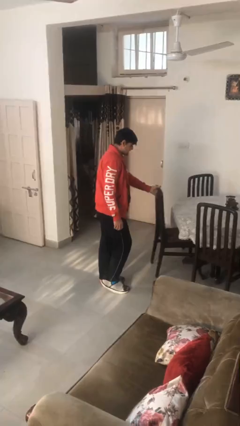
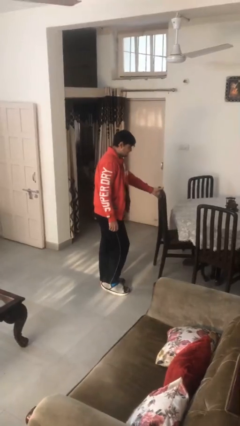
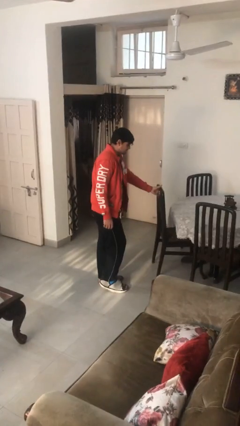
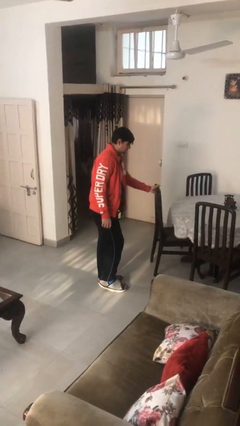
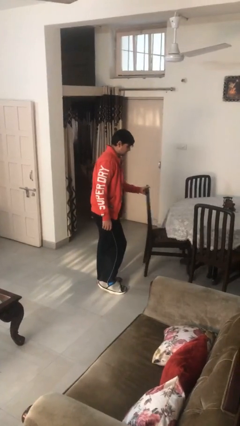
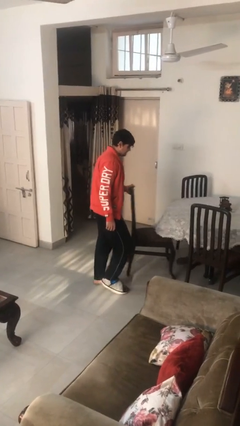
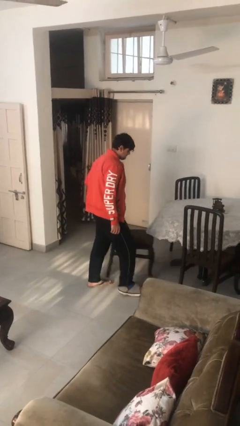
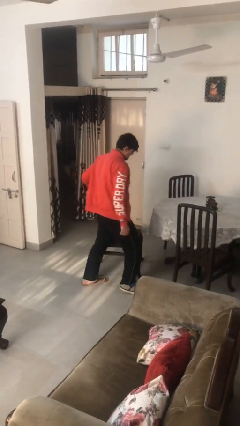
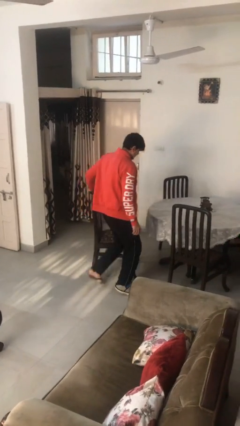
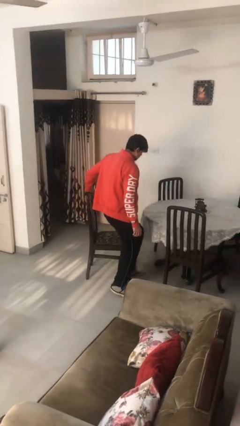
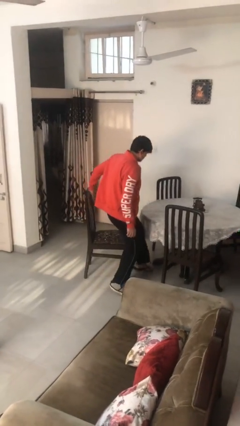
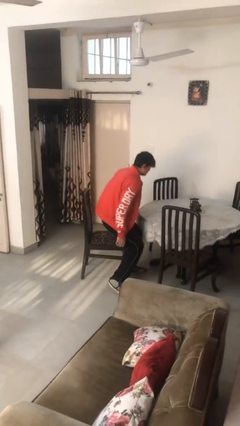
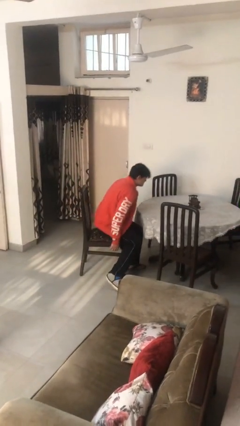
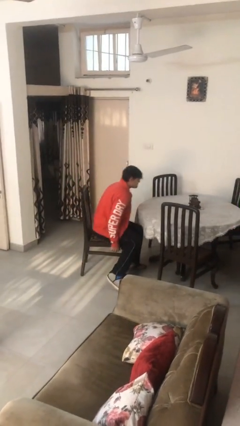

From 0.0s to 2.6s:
person sits down

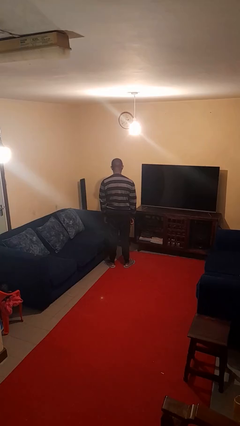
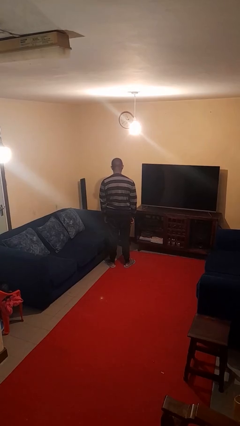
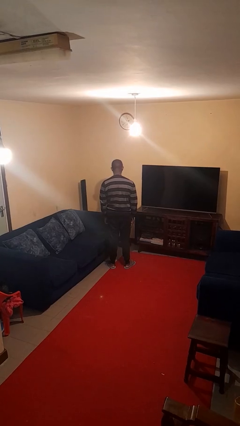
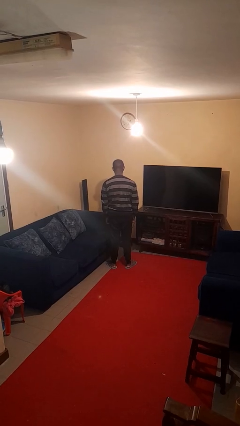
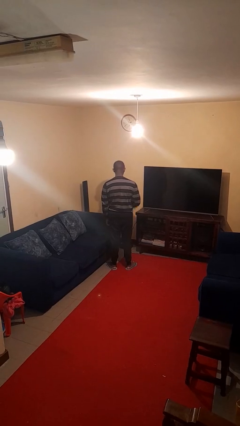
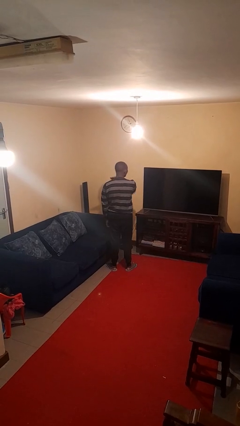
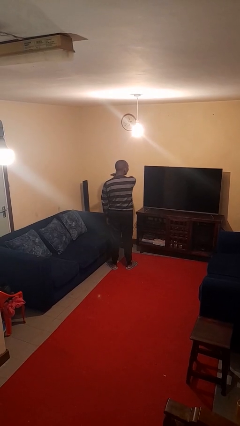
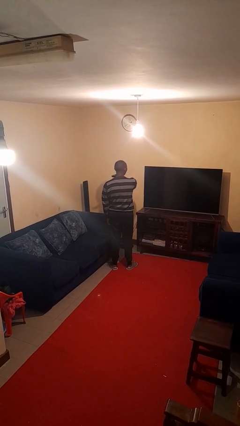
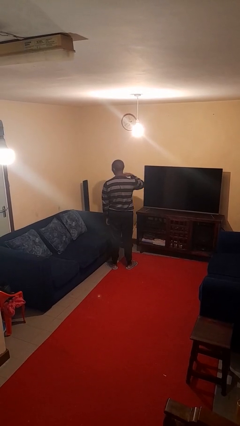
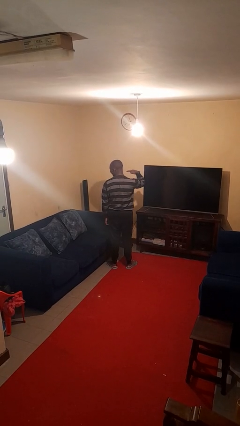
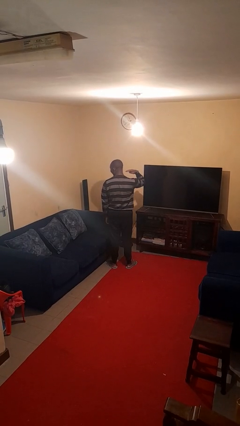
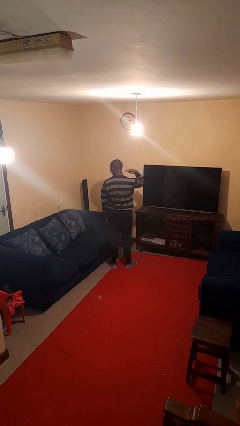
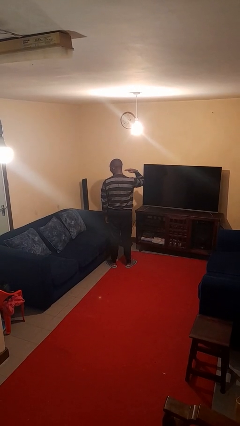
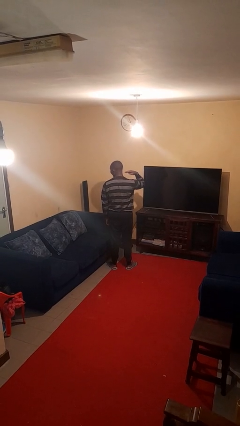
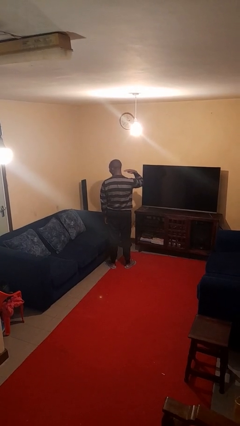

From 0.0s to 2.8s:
person gestures cut

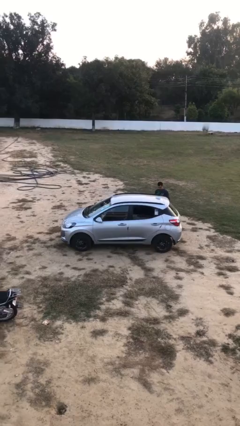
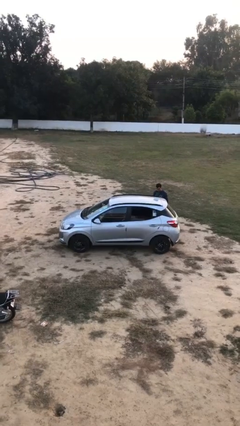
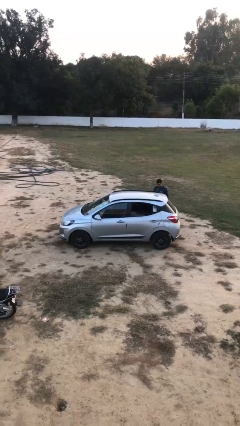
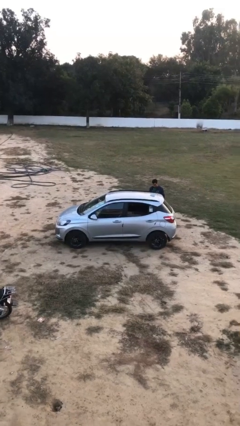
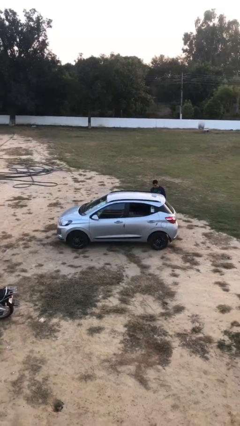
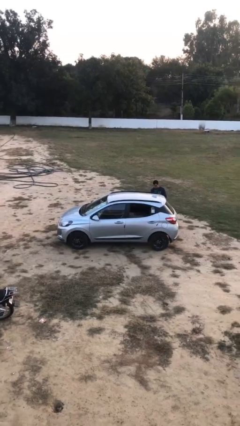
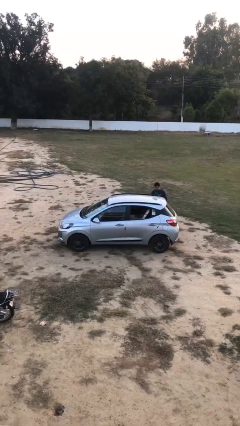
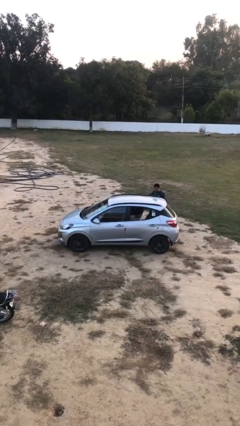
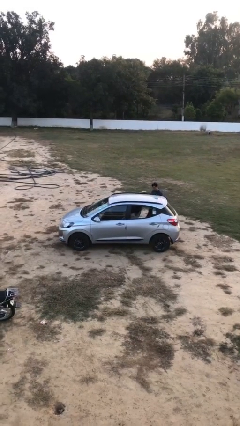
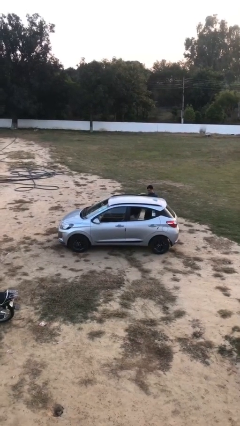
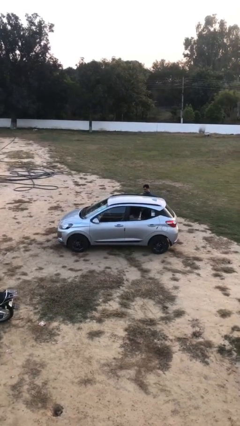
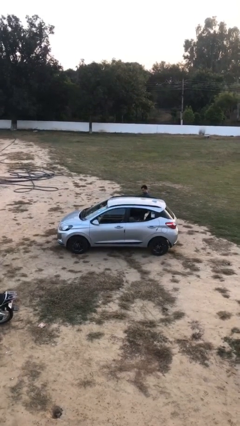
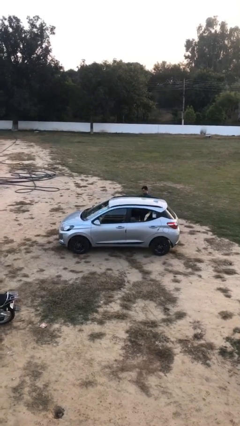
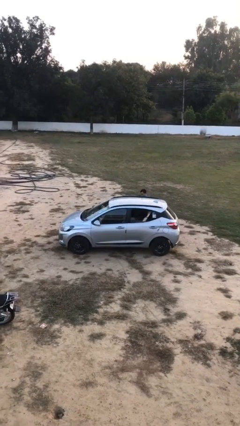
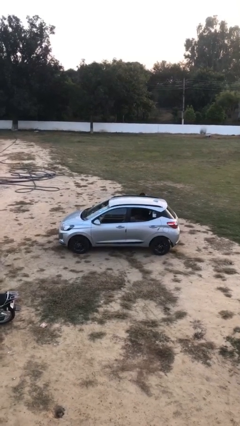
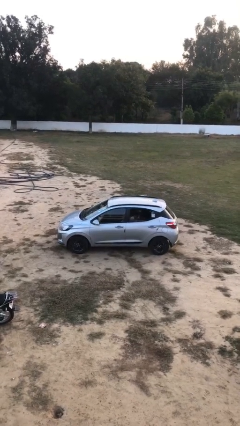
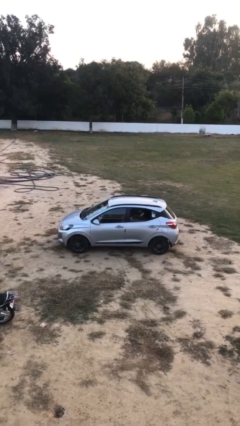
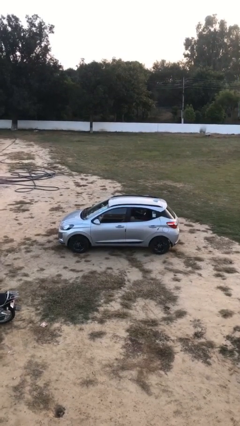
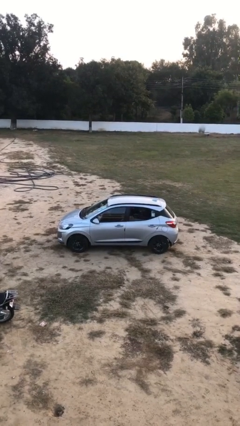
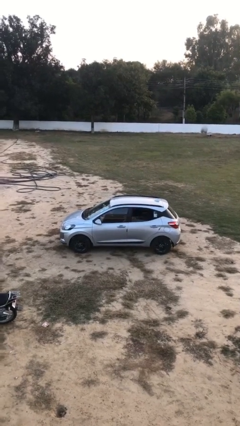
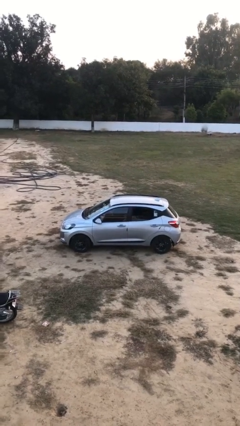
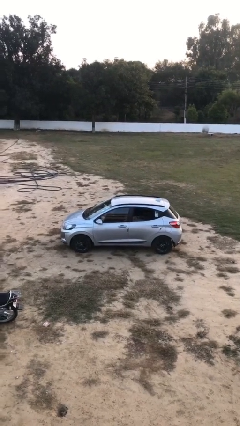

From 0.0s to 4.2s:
car picks up person

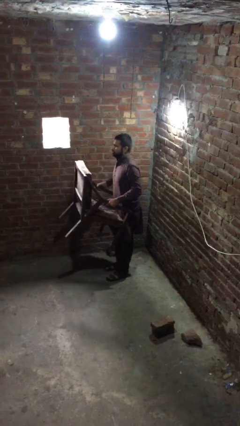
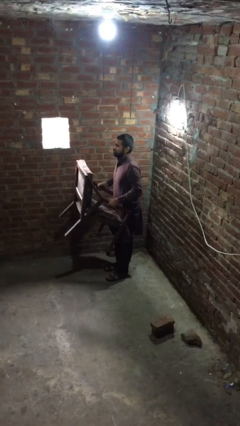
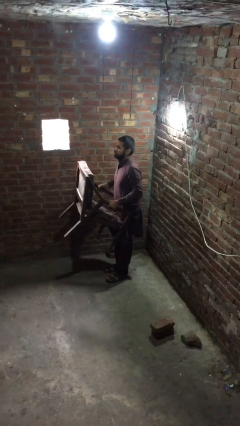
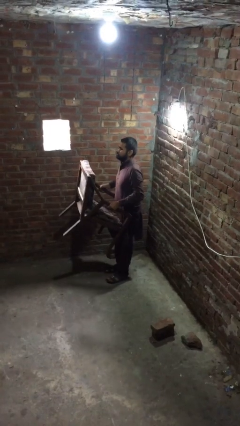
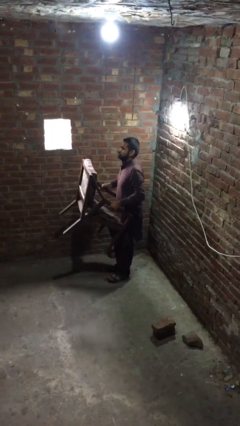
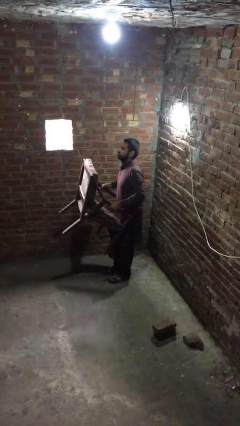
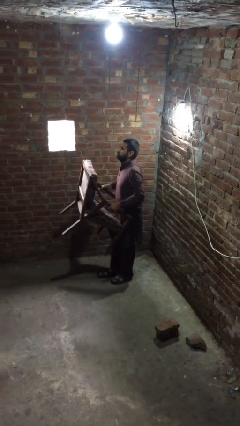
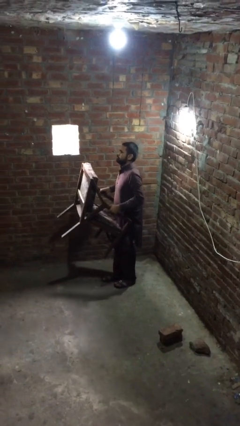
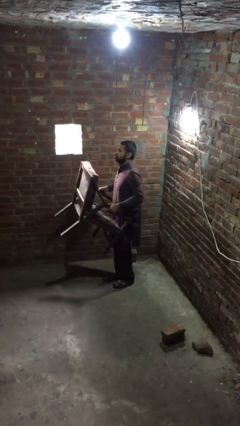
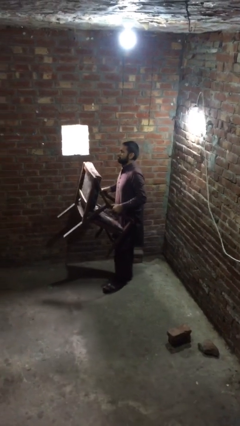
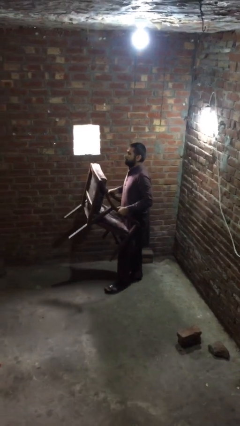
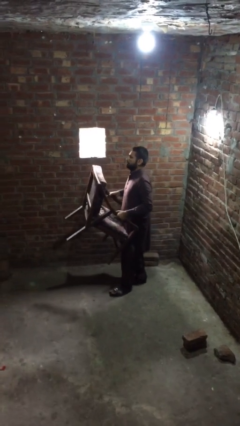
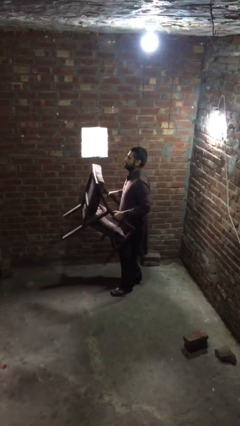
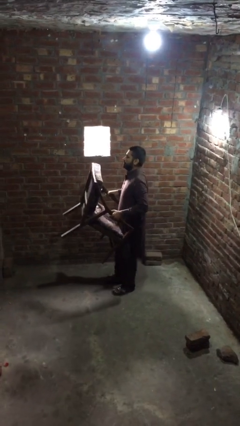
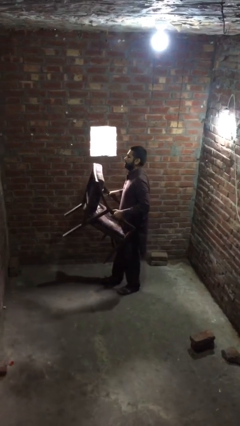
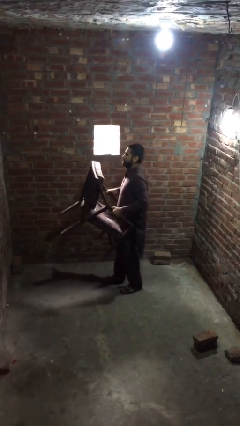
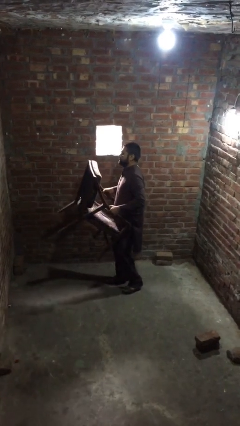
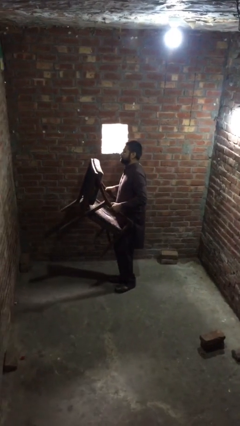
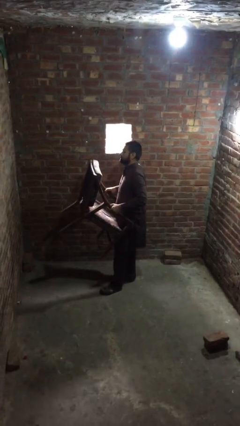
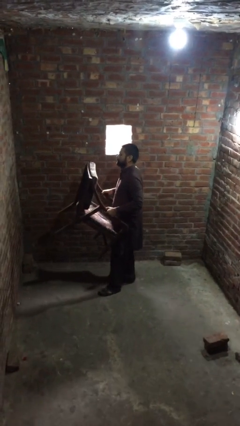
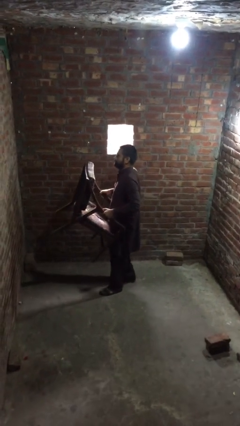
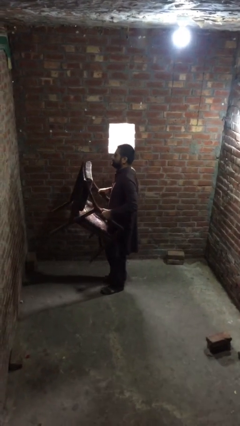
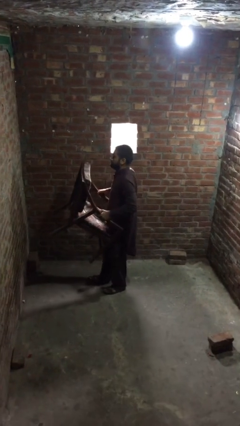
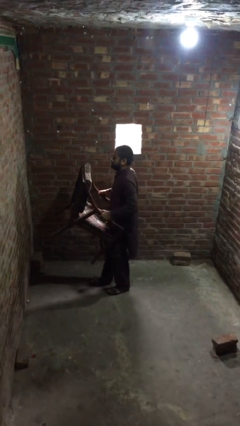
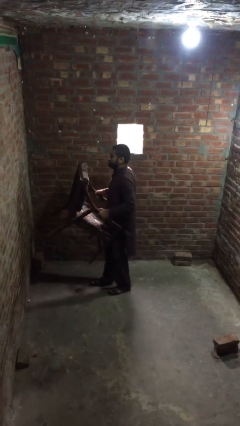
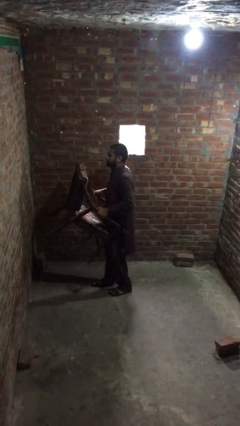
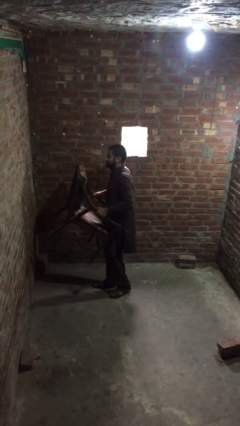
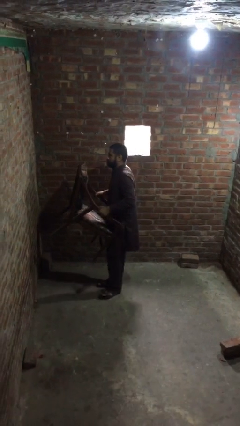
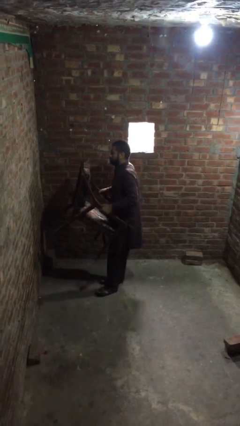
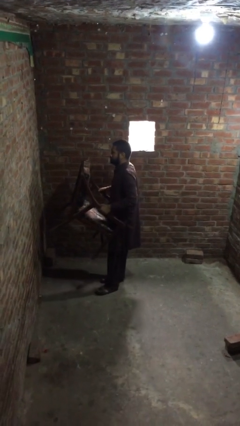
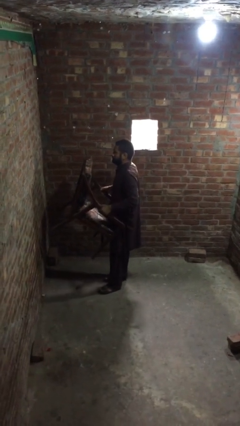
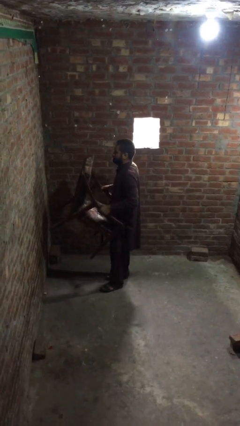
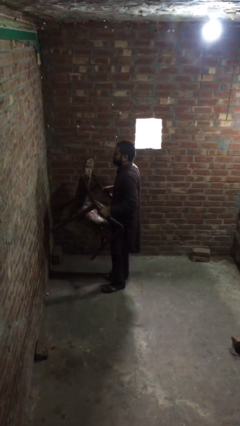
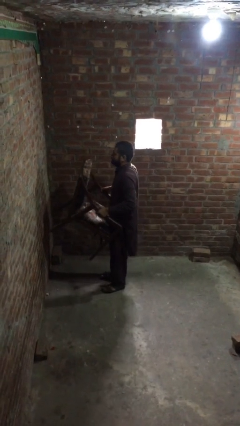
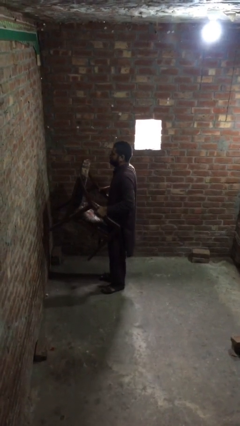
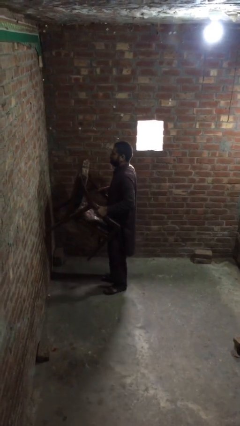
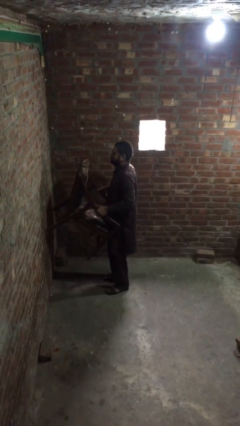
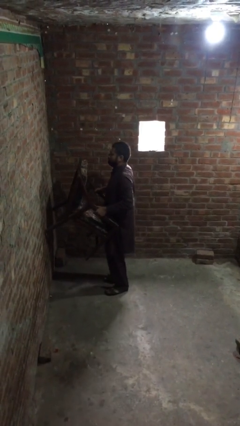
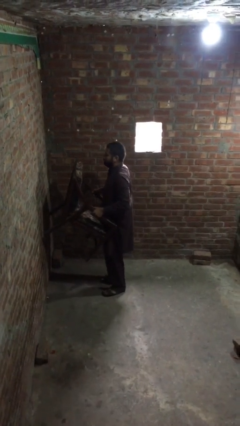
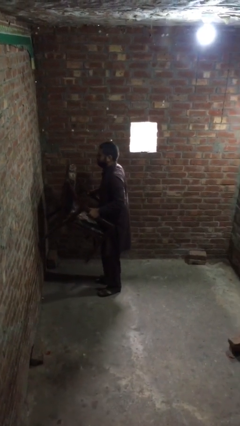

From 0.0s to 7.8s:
person carries heavy object

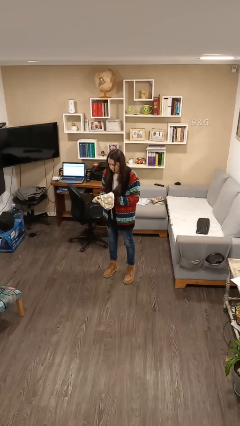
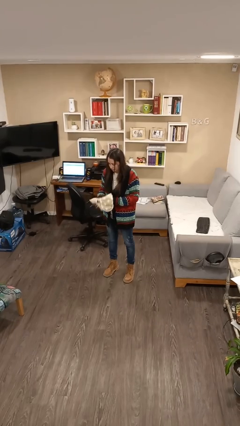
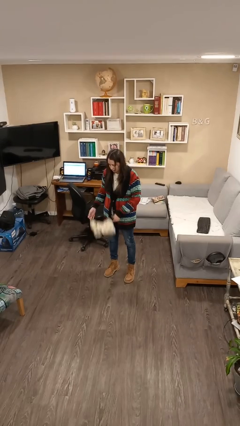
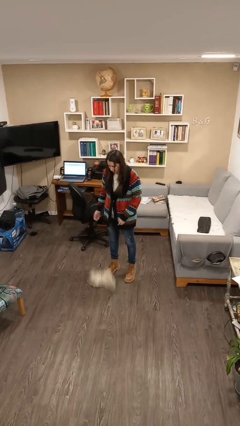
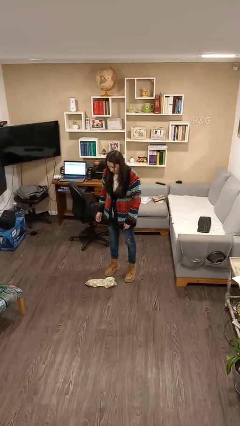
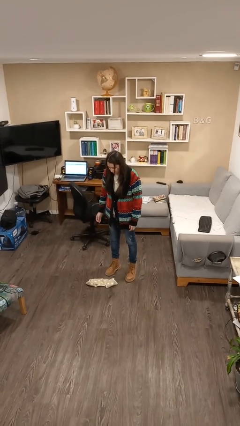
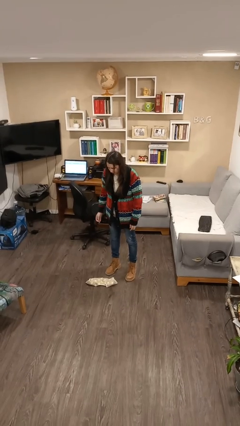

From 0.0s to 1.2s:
person drops object
